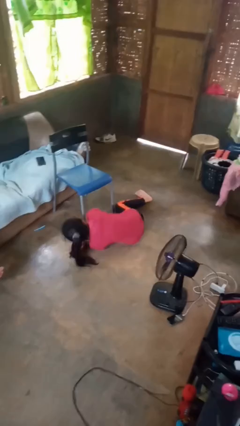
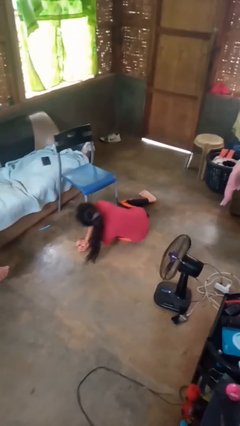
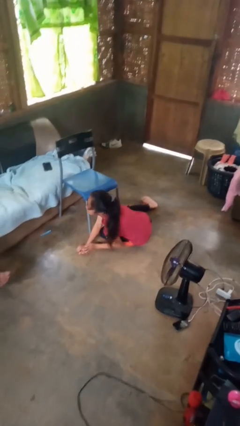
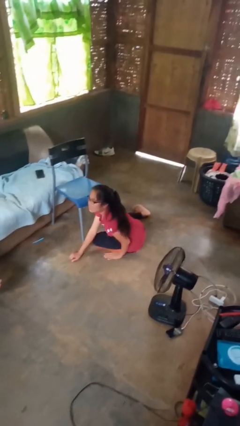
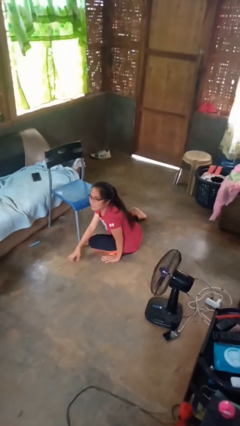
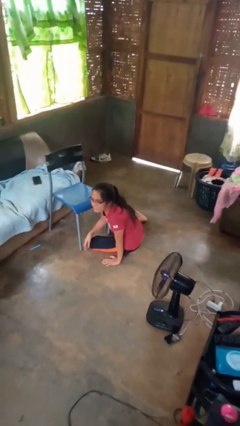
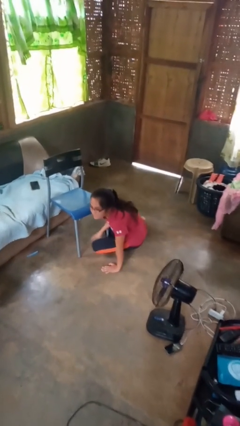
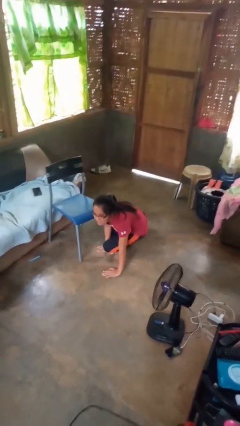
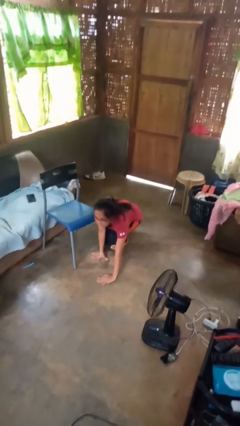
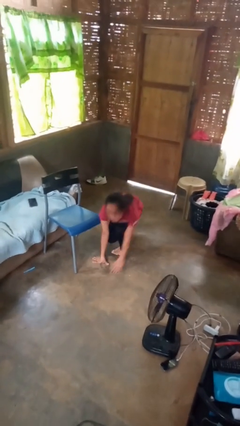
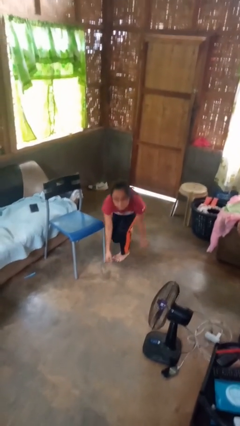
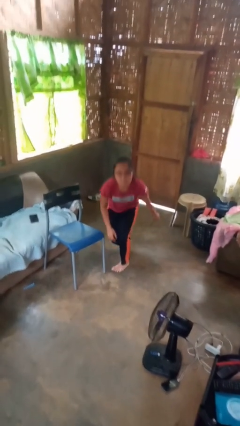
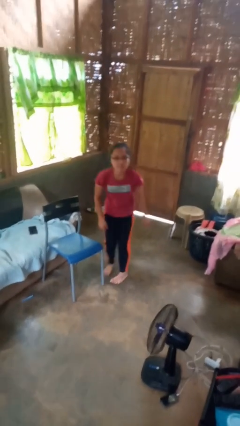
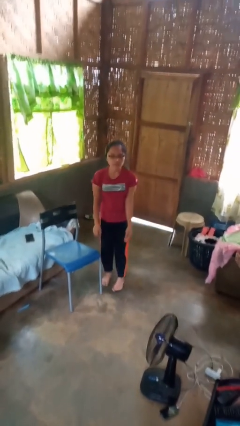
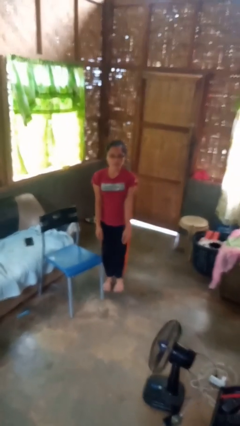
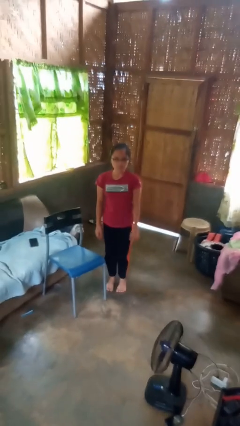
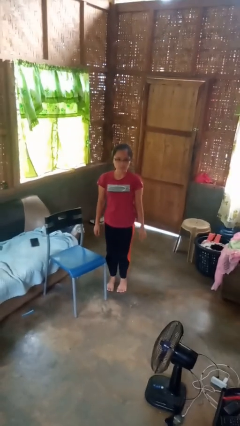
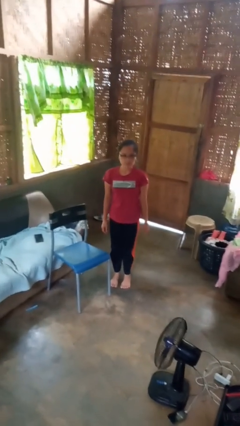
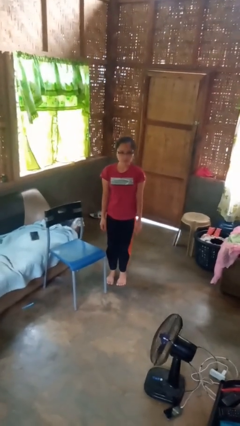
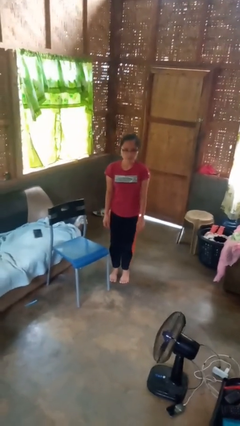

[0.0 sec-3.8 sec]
person stands up from floor

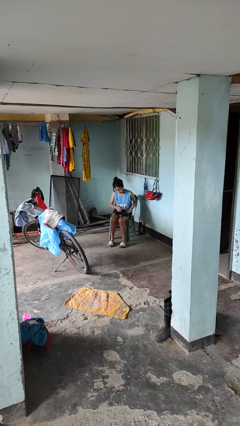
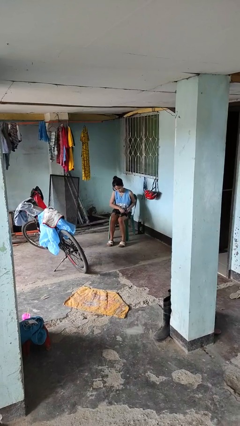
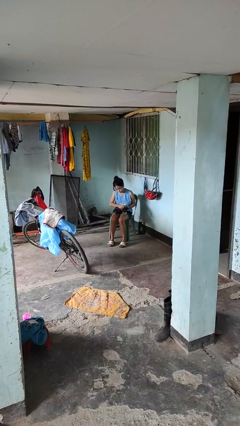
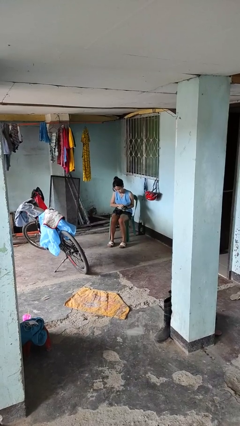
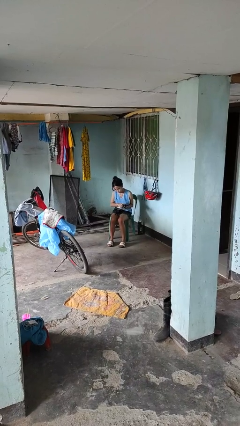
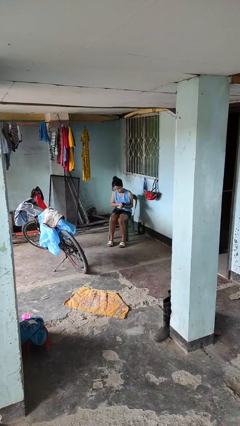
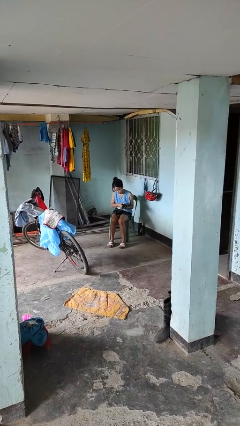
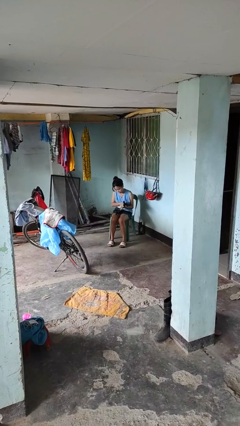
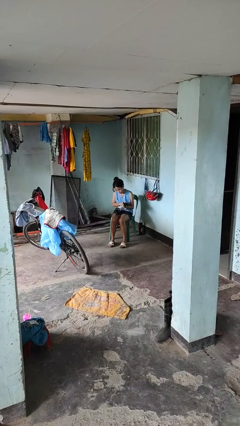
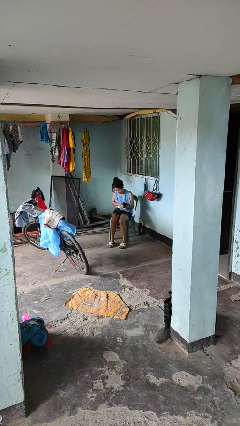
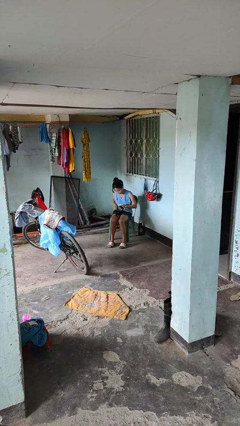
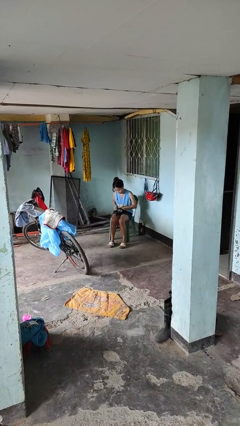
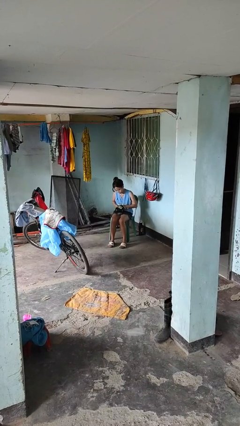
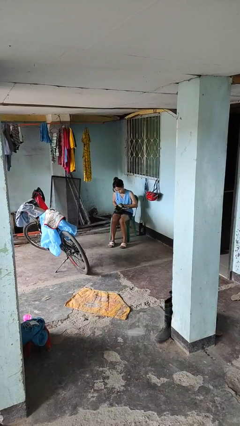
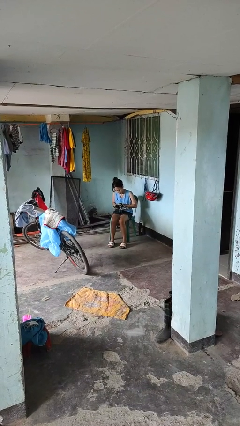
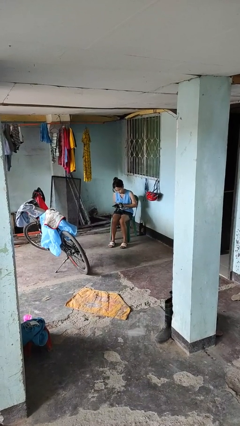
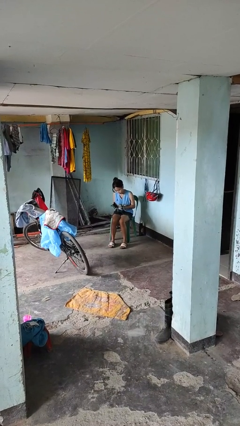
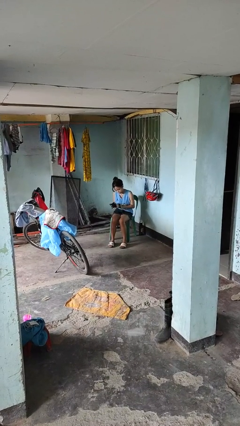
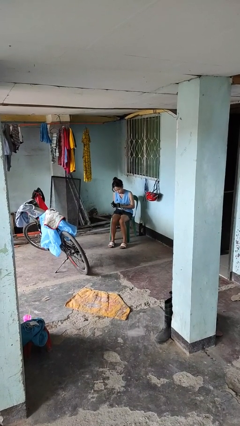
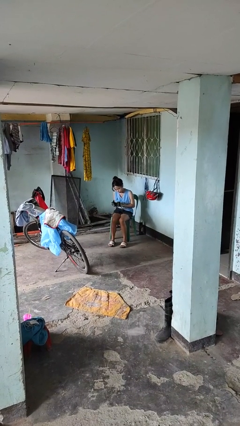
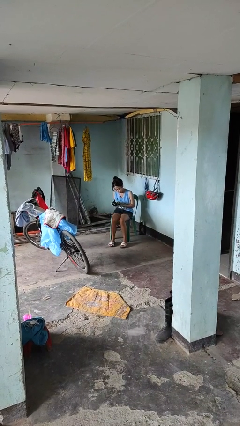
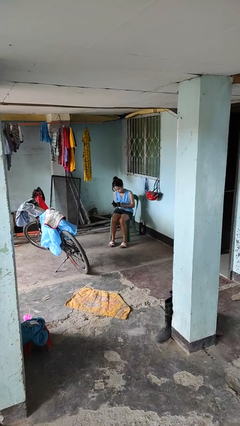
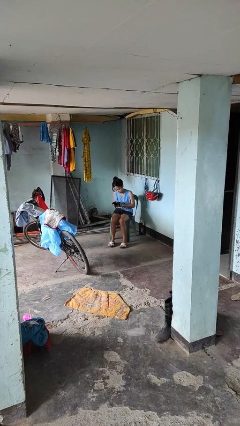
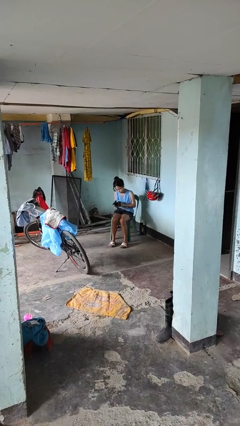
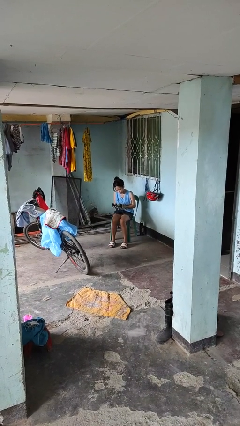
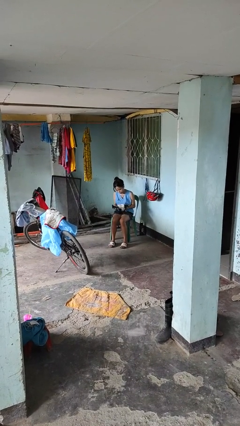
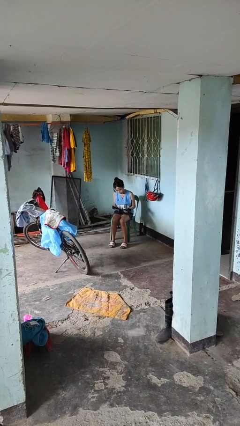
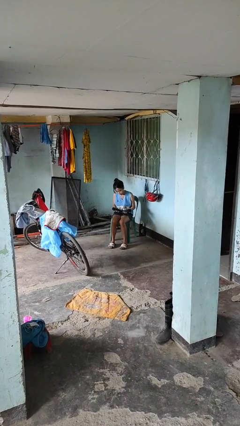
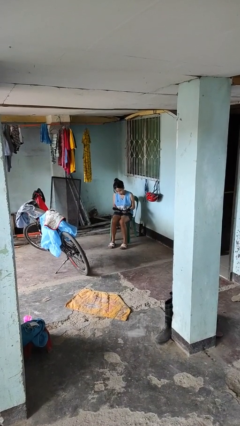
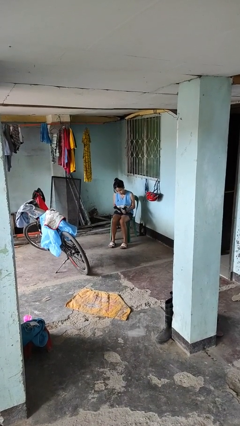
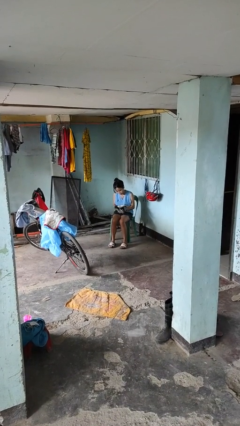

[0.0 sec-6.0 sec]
person puts on gloves

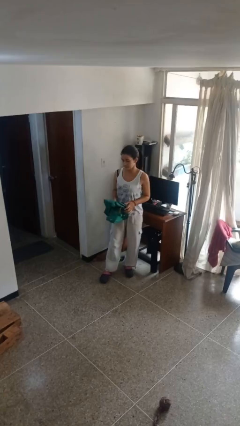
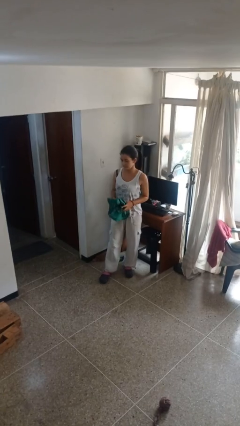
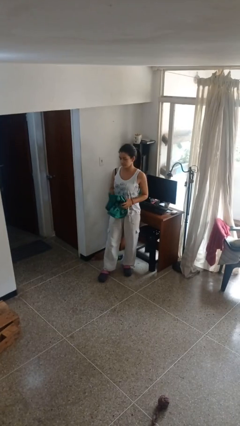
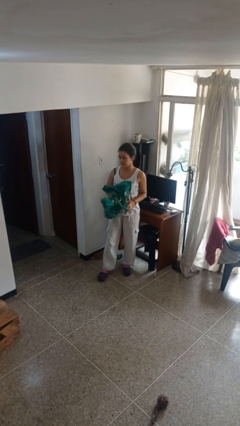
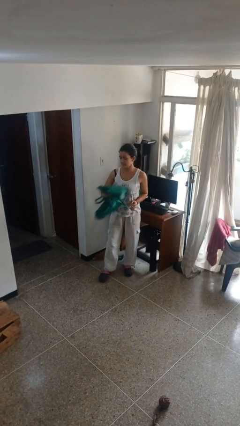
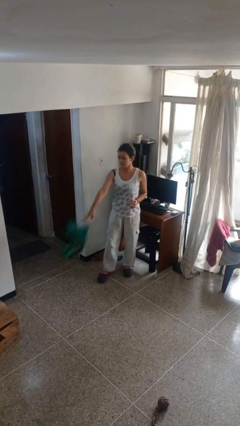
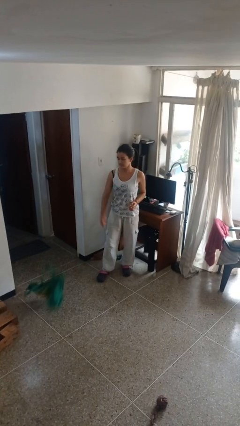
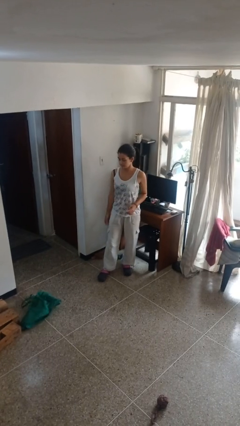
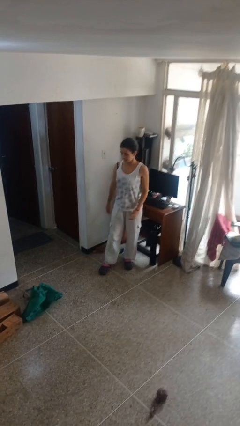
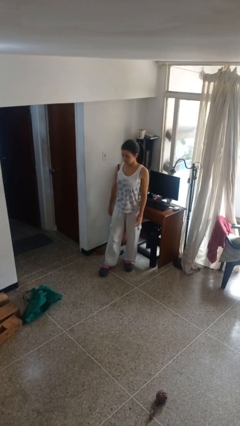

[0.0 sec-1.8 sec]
person throws object to ground

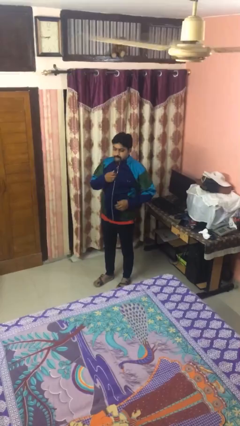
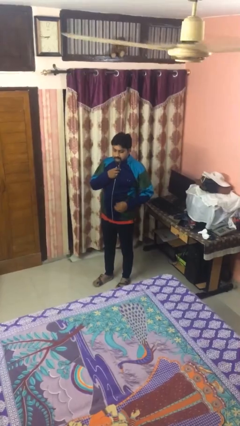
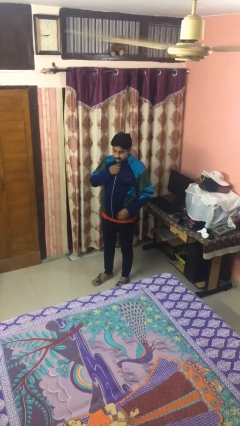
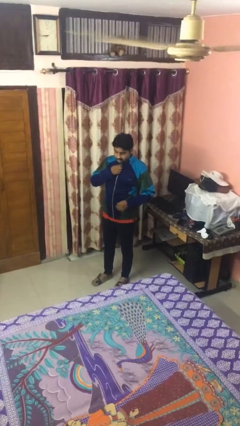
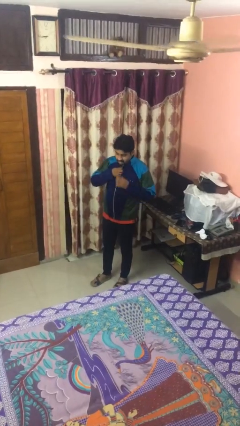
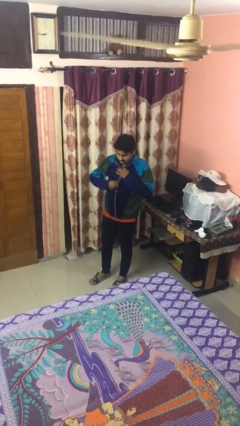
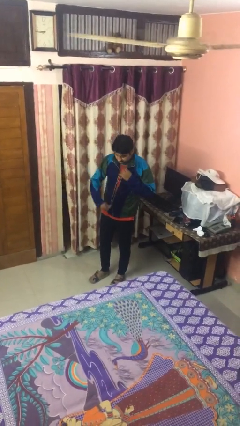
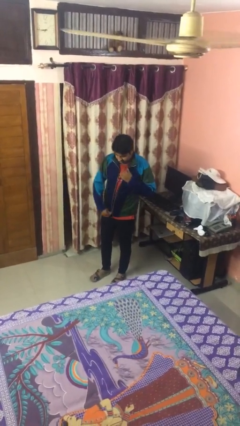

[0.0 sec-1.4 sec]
person unzips jacket

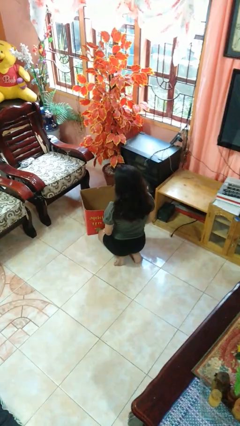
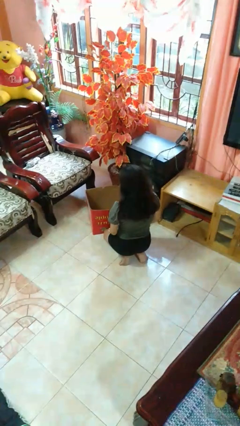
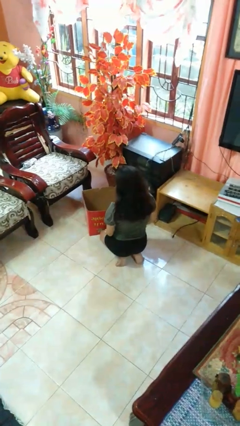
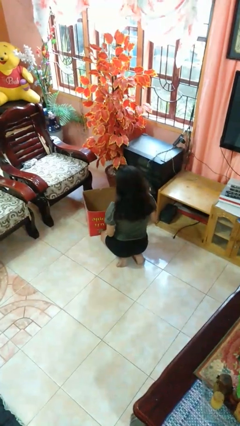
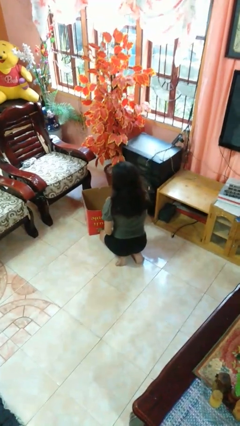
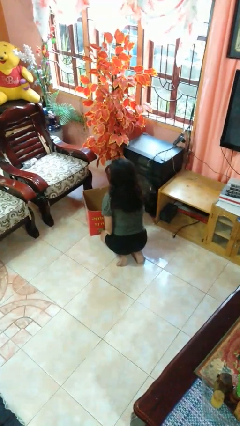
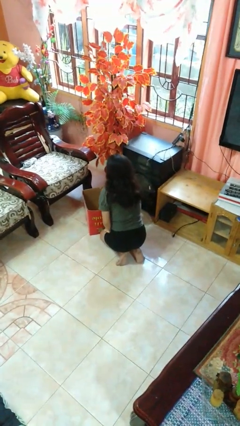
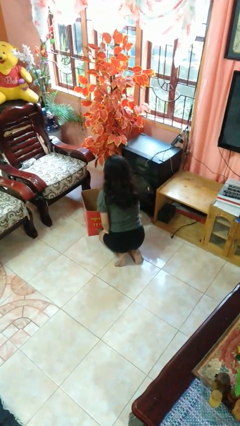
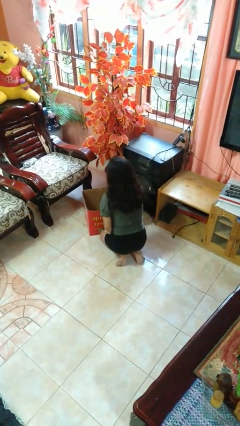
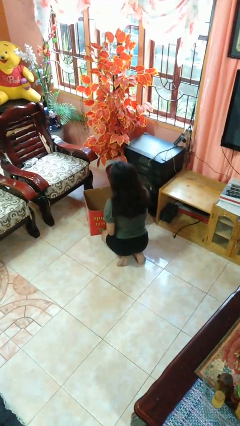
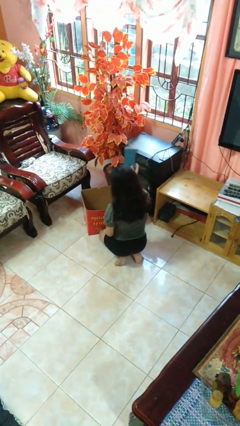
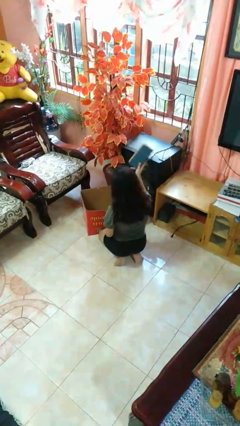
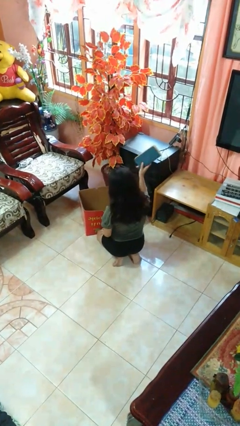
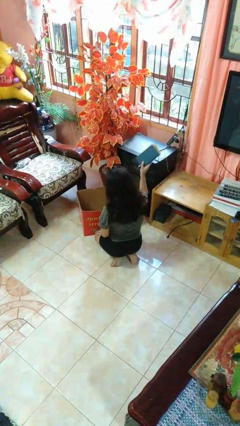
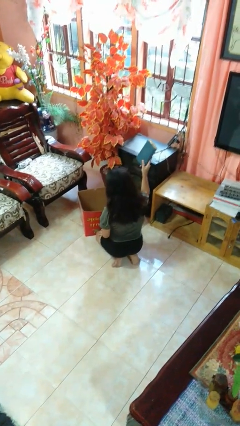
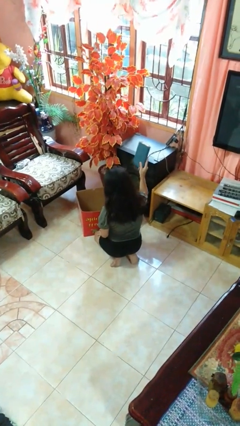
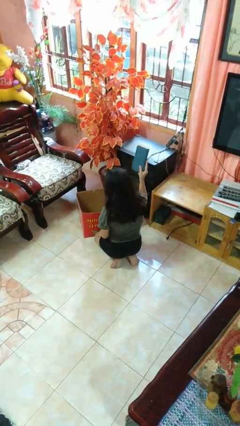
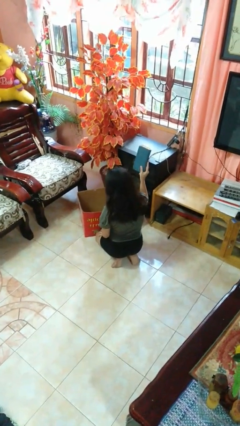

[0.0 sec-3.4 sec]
person takes object from box

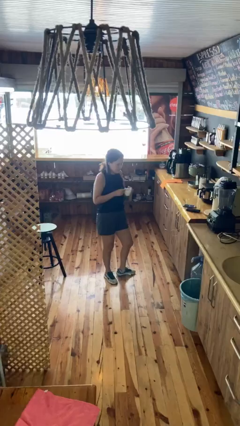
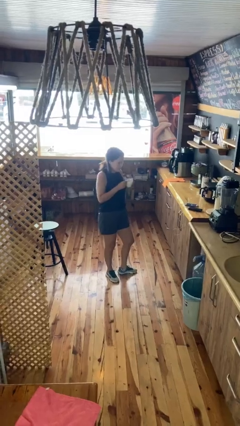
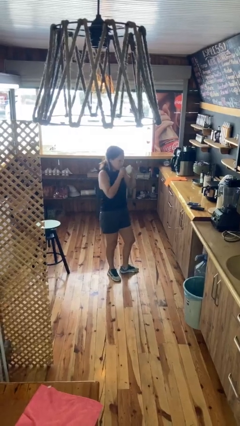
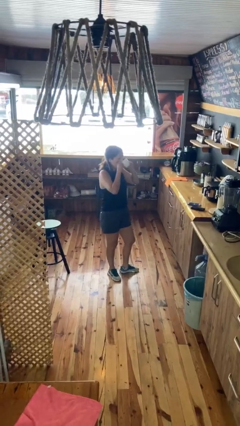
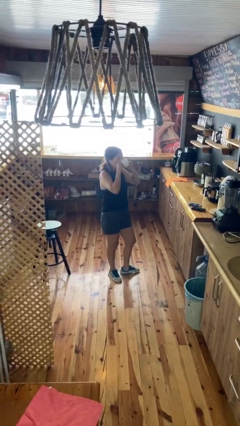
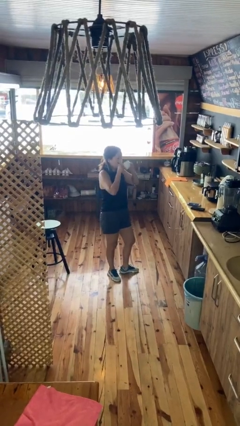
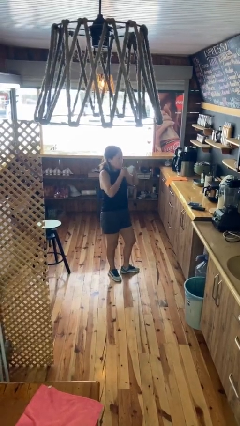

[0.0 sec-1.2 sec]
person drinks from mug
